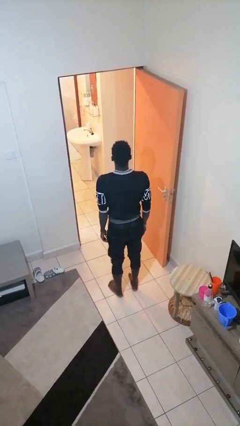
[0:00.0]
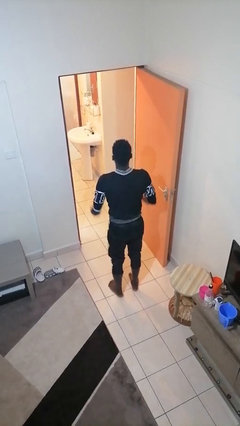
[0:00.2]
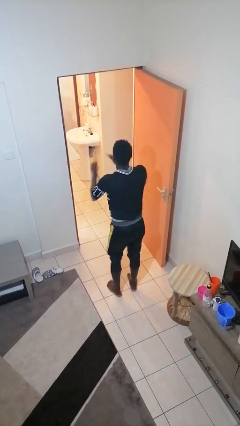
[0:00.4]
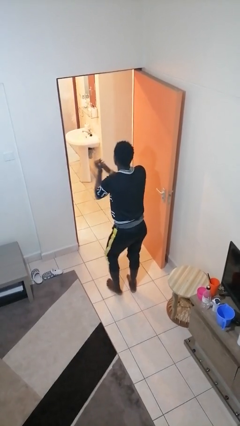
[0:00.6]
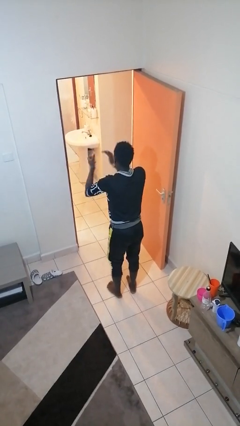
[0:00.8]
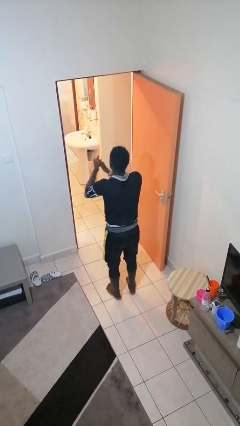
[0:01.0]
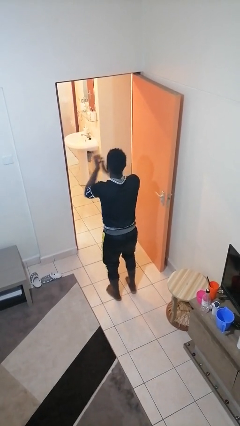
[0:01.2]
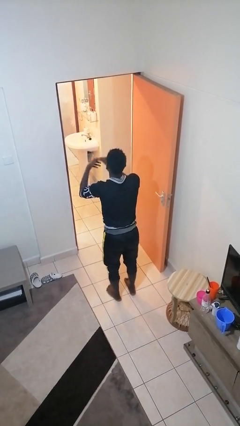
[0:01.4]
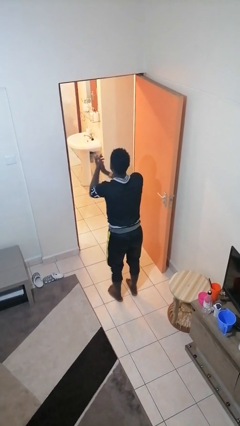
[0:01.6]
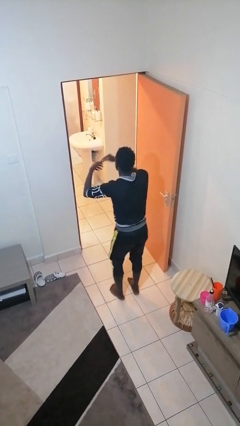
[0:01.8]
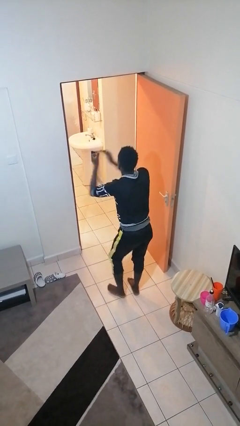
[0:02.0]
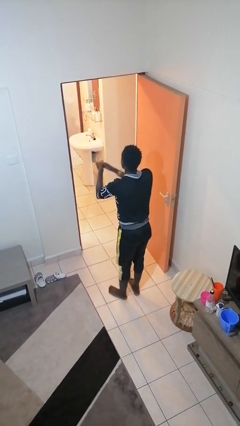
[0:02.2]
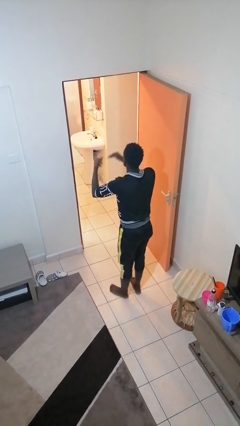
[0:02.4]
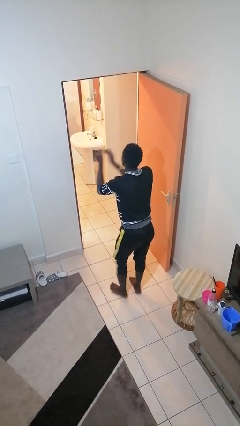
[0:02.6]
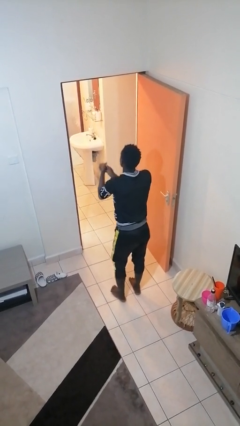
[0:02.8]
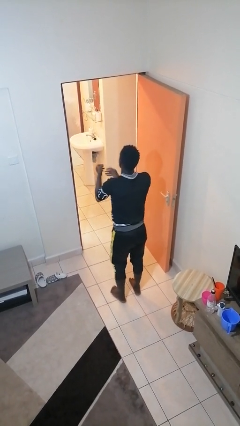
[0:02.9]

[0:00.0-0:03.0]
person claps hands

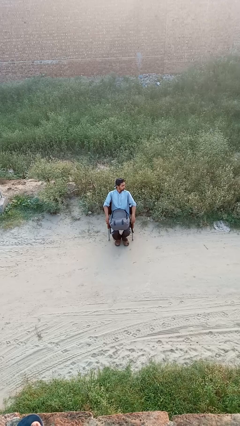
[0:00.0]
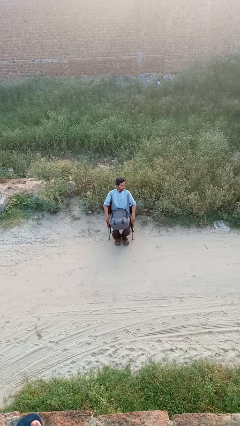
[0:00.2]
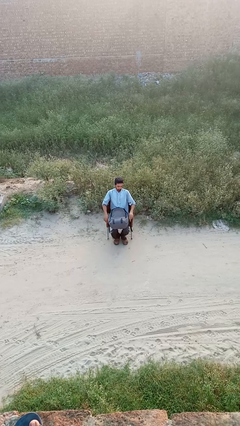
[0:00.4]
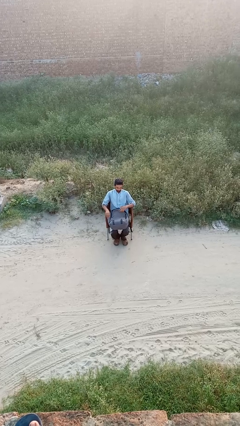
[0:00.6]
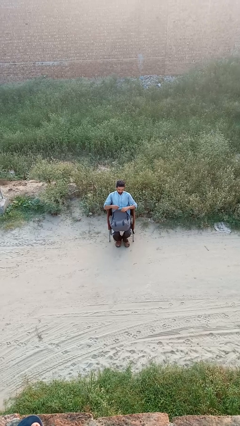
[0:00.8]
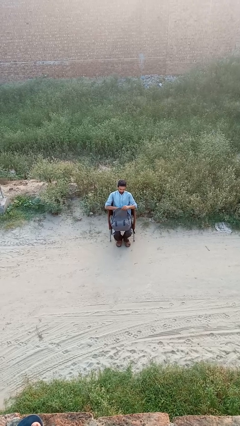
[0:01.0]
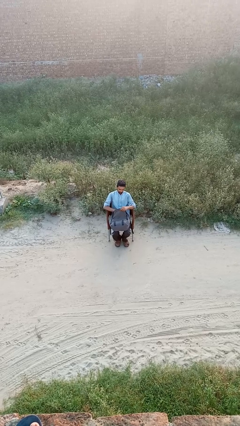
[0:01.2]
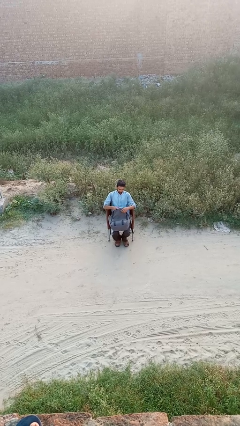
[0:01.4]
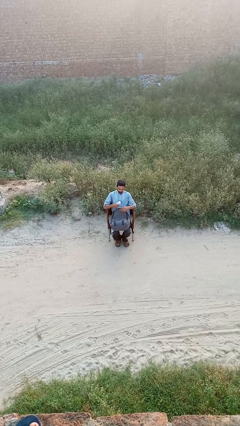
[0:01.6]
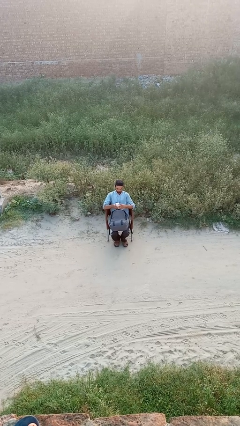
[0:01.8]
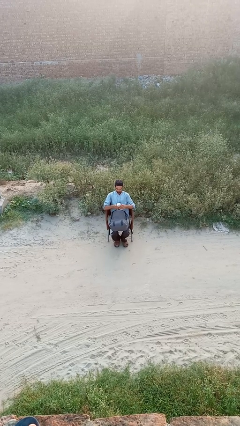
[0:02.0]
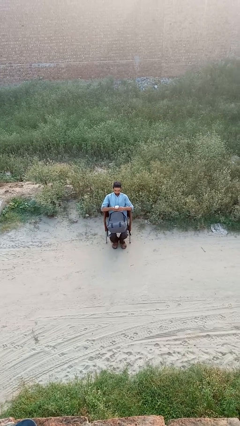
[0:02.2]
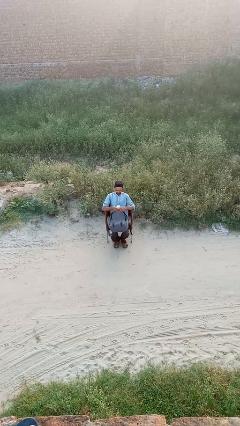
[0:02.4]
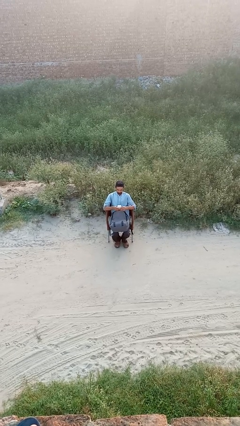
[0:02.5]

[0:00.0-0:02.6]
person searches in backpack

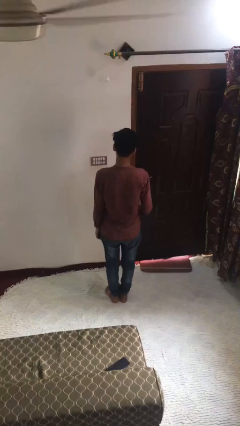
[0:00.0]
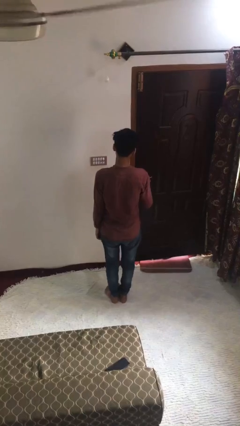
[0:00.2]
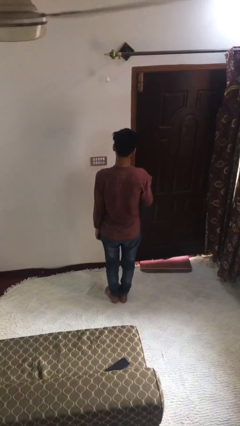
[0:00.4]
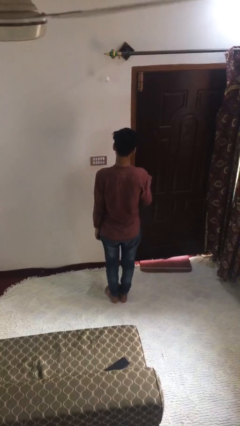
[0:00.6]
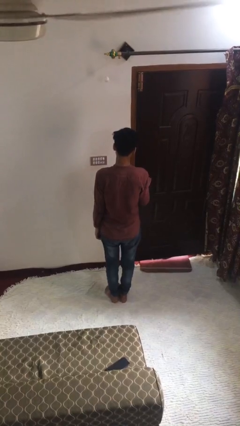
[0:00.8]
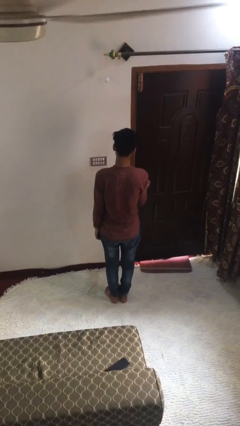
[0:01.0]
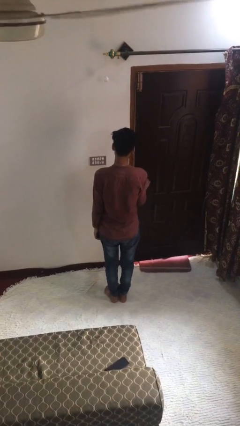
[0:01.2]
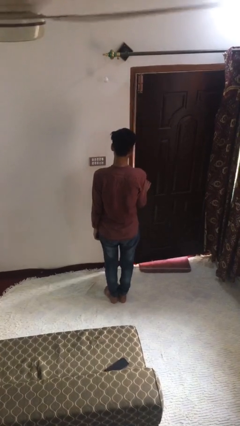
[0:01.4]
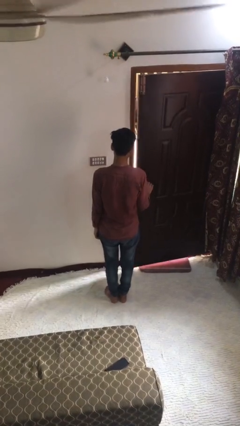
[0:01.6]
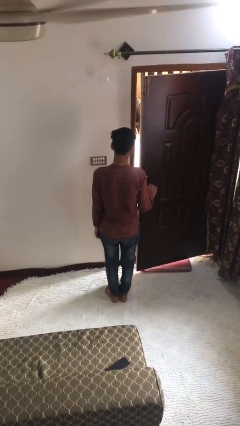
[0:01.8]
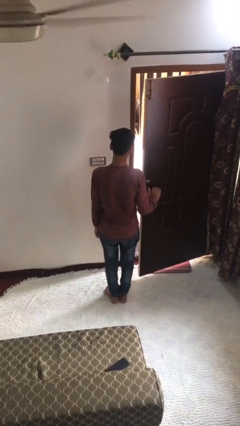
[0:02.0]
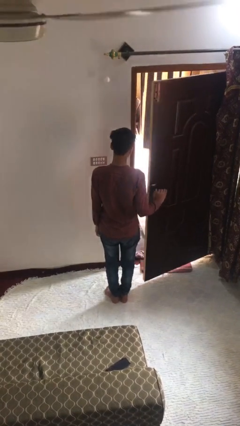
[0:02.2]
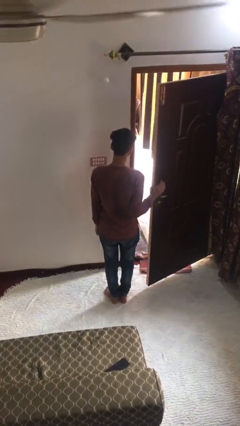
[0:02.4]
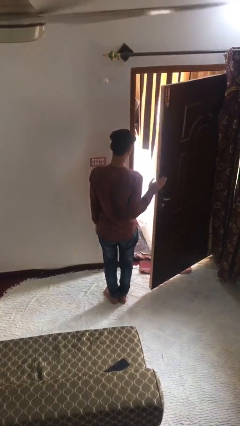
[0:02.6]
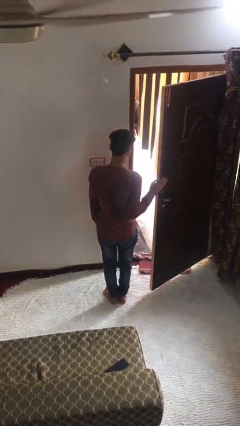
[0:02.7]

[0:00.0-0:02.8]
person opens facility door

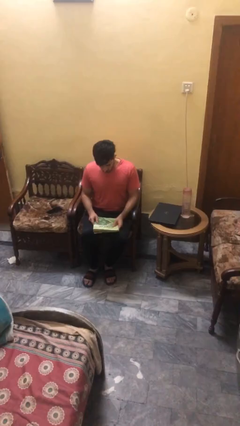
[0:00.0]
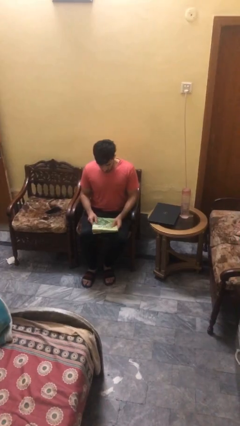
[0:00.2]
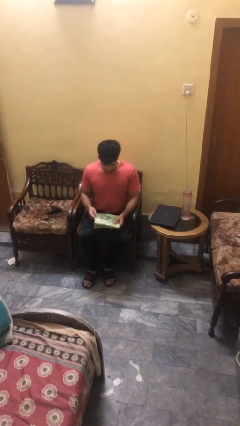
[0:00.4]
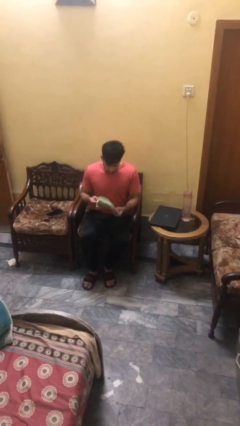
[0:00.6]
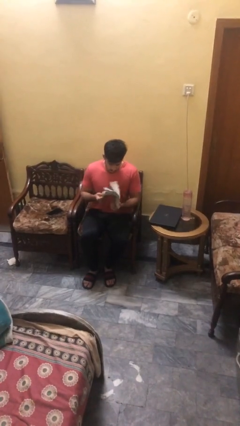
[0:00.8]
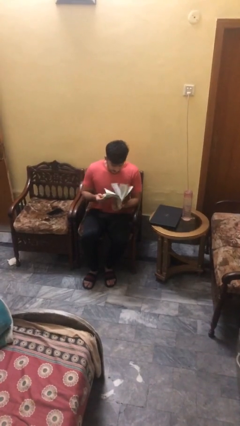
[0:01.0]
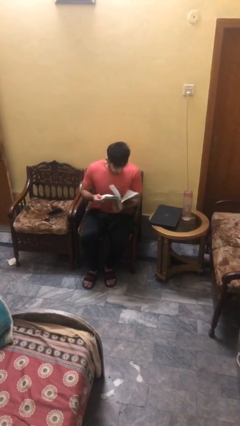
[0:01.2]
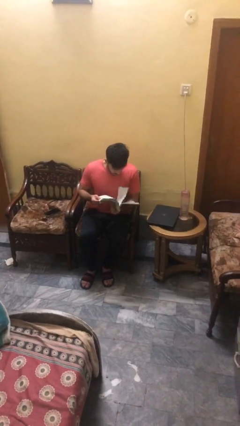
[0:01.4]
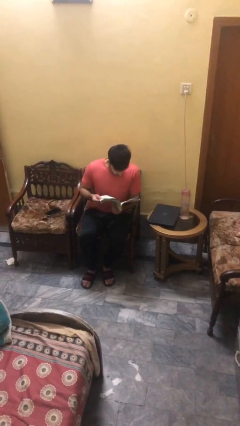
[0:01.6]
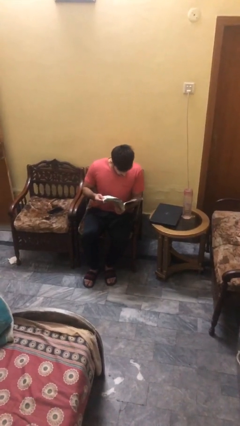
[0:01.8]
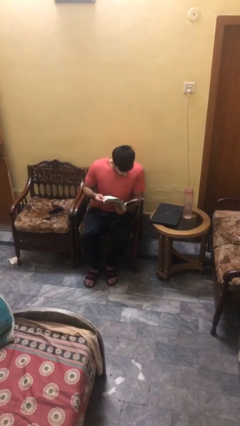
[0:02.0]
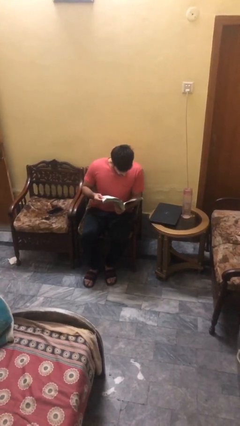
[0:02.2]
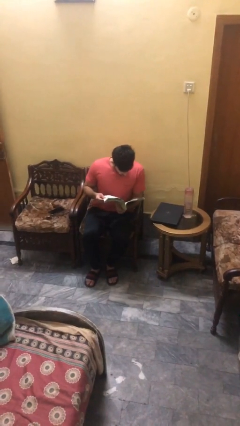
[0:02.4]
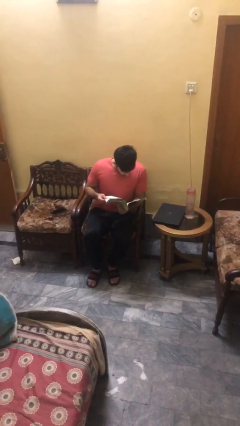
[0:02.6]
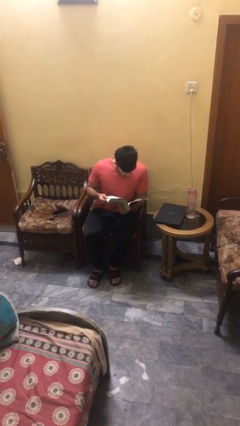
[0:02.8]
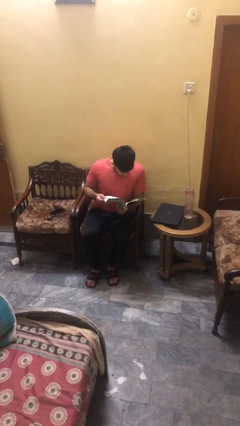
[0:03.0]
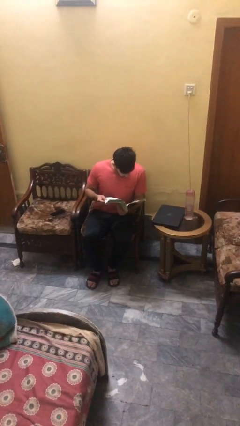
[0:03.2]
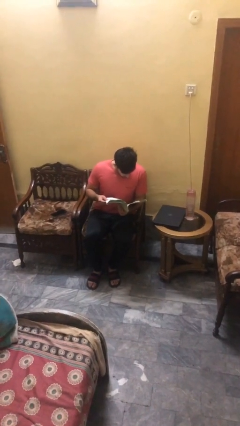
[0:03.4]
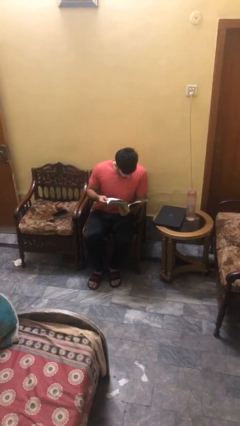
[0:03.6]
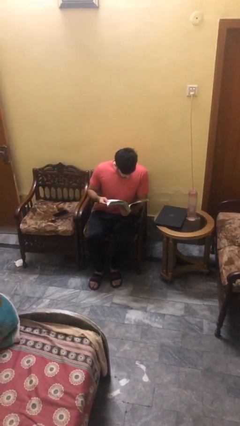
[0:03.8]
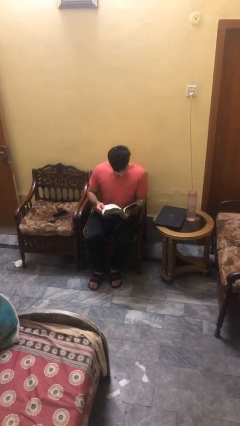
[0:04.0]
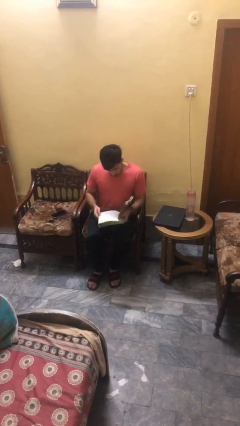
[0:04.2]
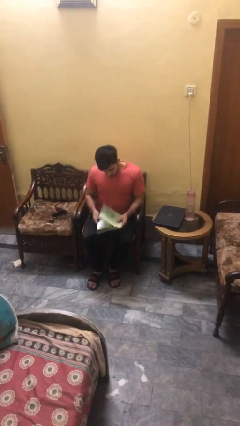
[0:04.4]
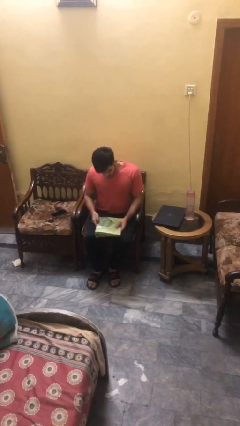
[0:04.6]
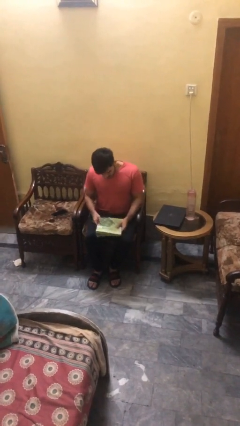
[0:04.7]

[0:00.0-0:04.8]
person reads document

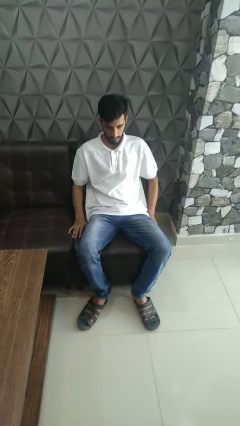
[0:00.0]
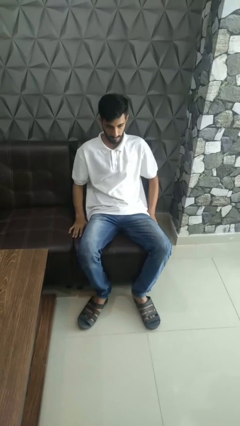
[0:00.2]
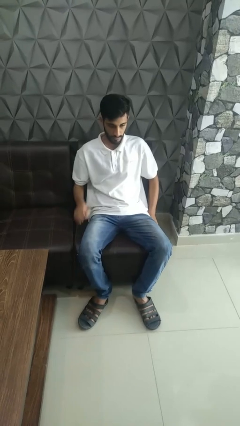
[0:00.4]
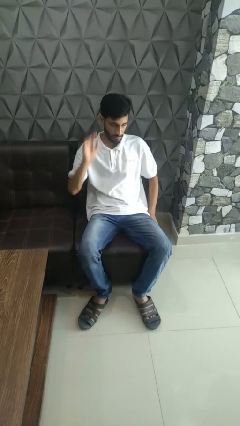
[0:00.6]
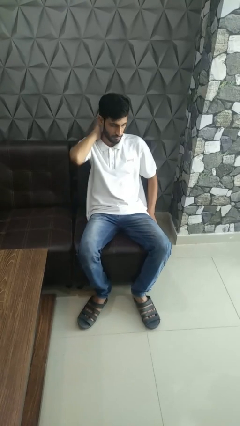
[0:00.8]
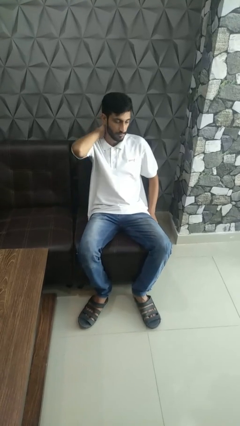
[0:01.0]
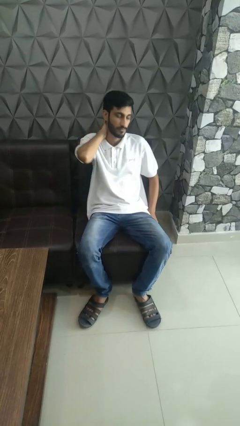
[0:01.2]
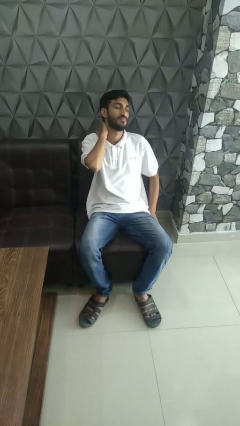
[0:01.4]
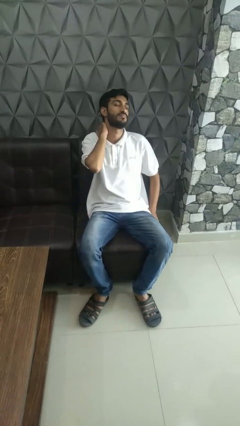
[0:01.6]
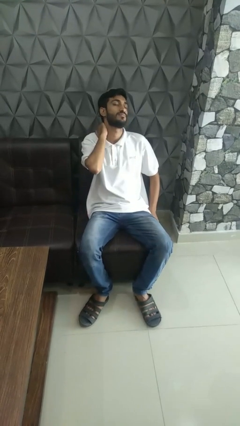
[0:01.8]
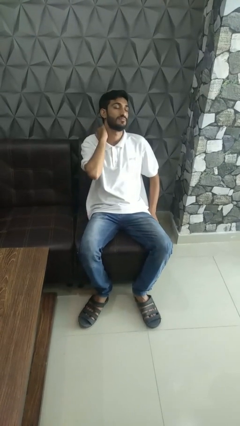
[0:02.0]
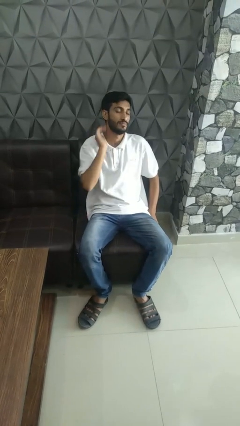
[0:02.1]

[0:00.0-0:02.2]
person rubs neck

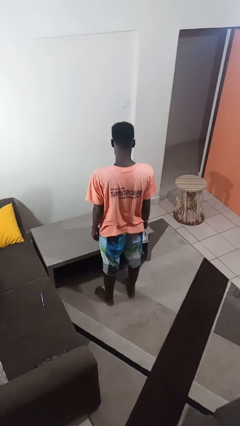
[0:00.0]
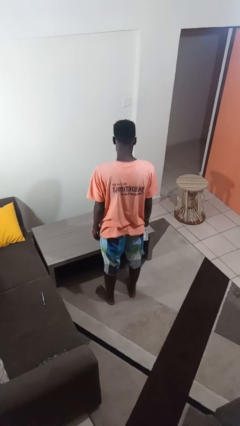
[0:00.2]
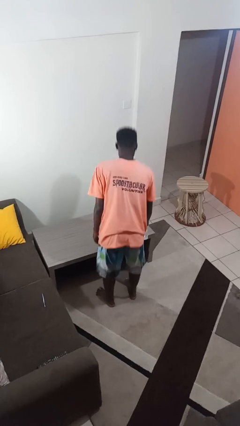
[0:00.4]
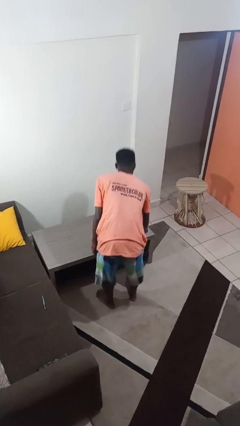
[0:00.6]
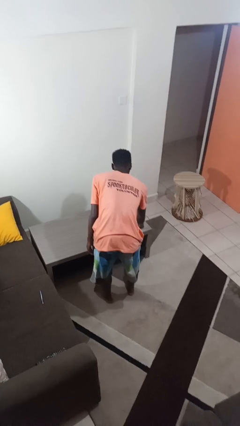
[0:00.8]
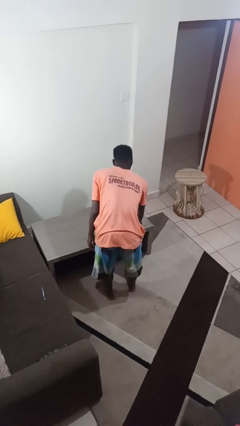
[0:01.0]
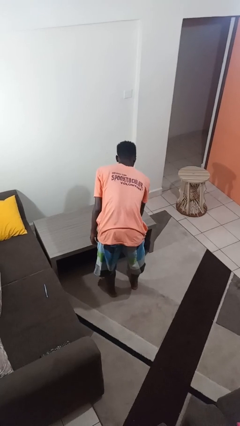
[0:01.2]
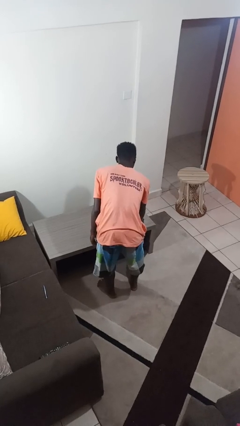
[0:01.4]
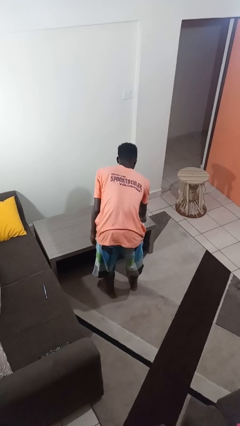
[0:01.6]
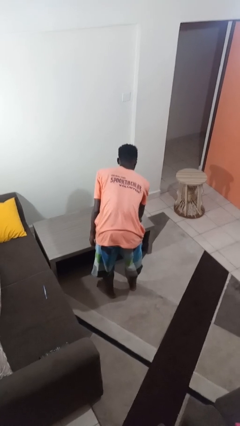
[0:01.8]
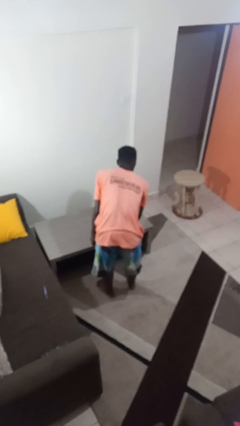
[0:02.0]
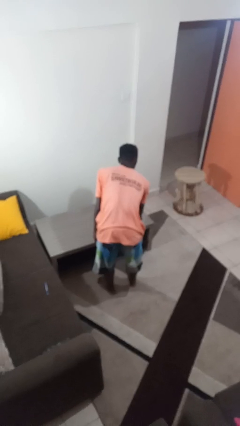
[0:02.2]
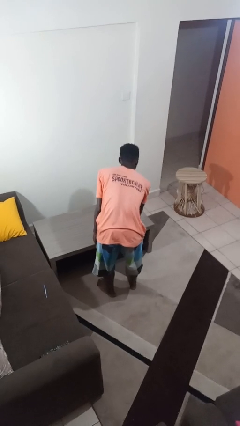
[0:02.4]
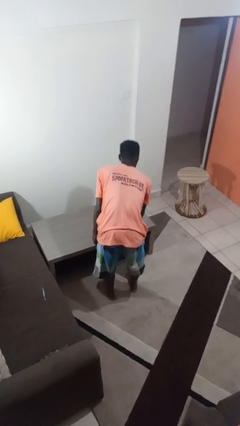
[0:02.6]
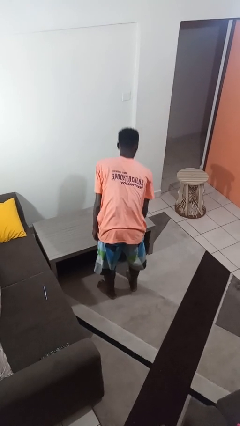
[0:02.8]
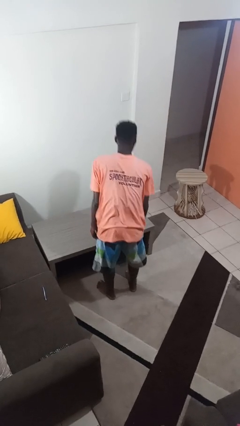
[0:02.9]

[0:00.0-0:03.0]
person sprays from bottle
